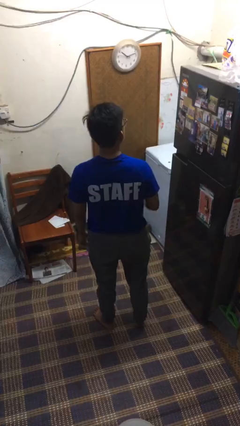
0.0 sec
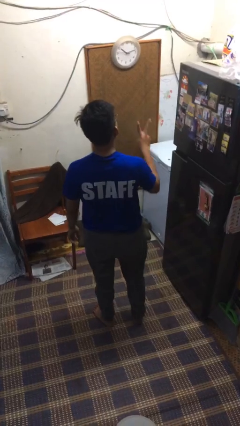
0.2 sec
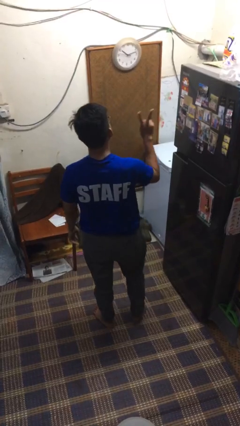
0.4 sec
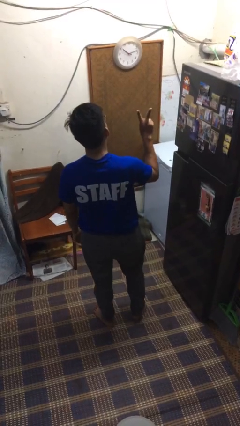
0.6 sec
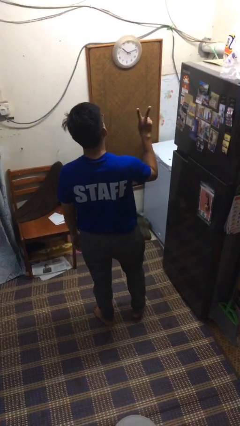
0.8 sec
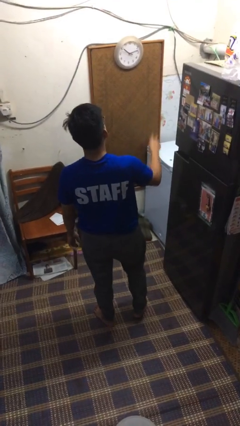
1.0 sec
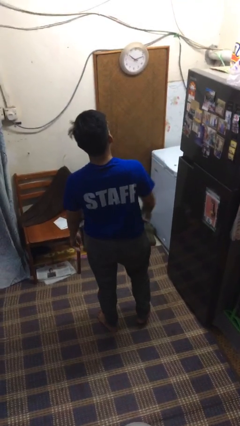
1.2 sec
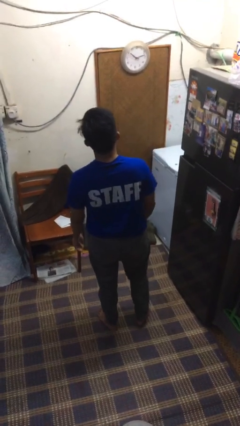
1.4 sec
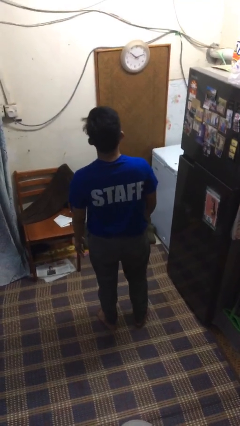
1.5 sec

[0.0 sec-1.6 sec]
person gestures peace

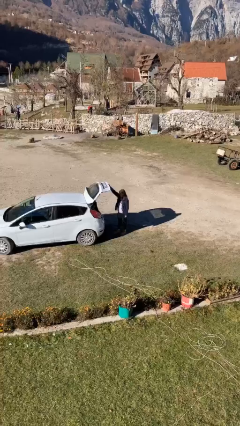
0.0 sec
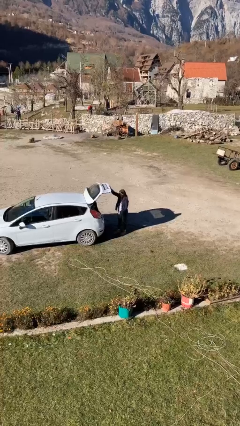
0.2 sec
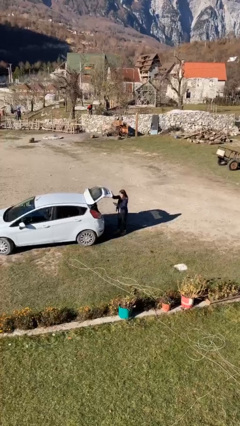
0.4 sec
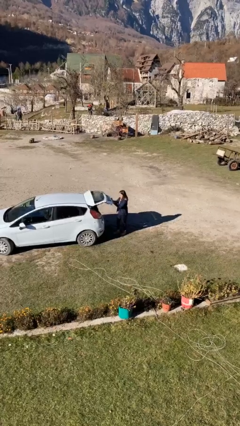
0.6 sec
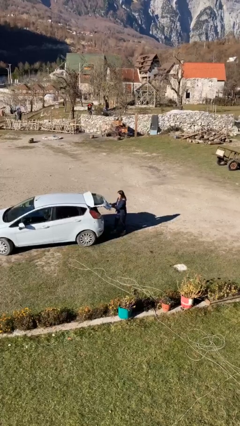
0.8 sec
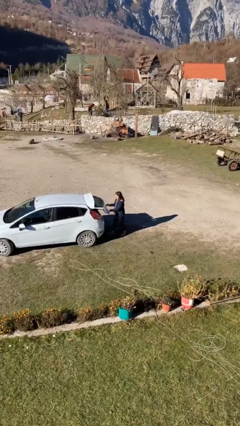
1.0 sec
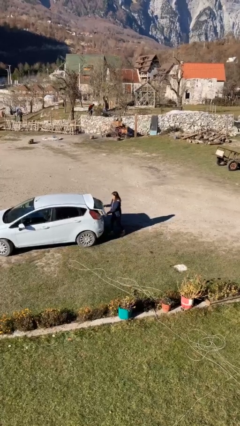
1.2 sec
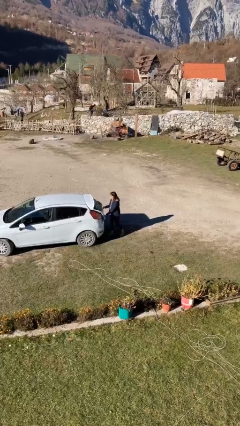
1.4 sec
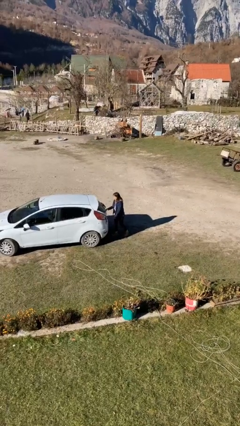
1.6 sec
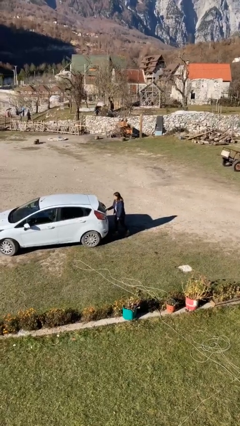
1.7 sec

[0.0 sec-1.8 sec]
person closes car trunk

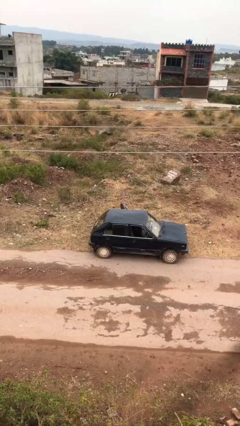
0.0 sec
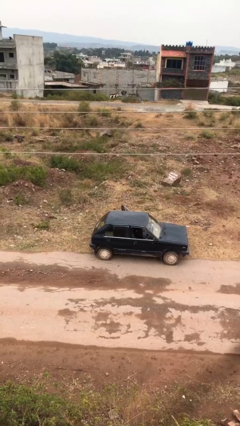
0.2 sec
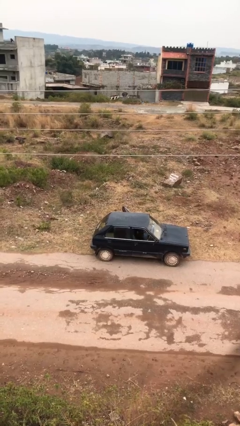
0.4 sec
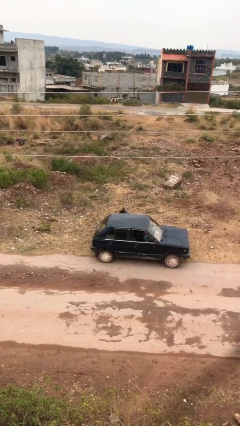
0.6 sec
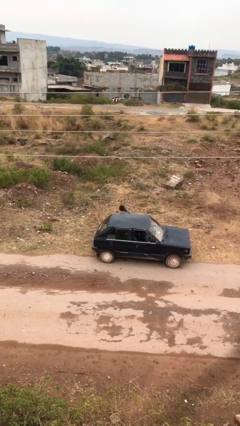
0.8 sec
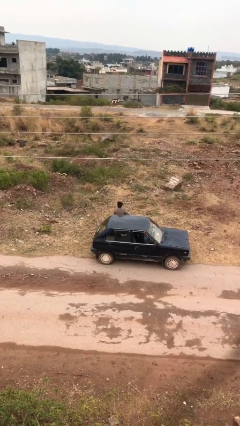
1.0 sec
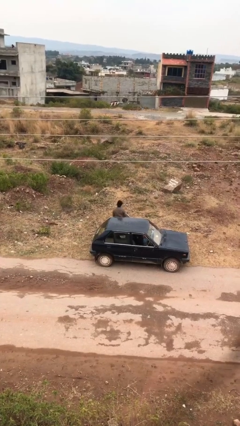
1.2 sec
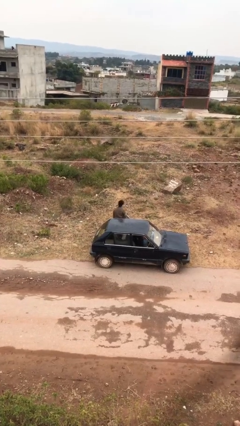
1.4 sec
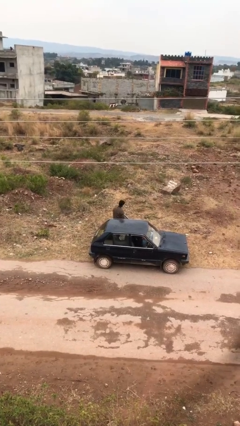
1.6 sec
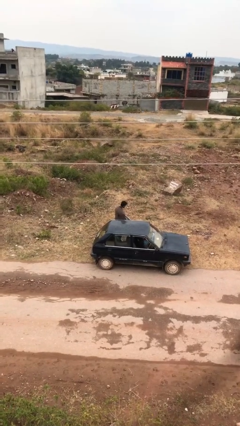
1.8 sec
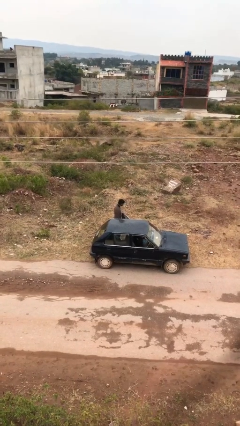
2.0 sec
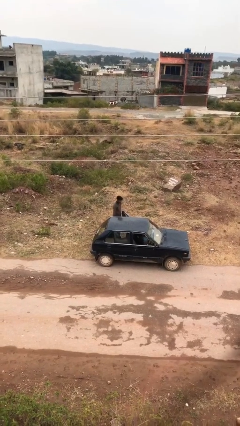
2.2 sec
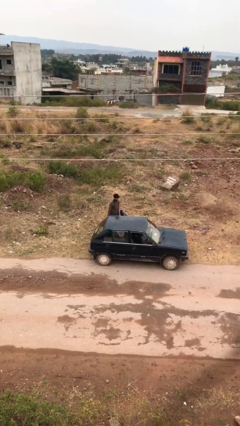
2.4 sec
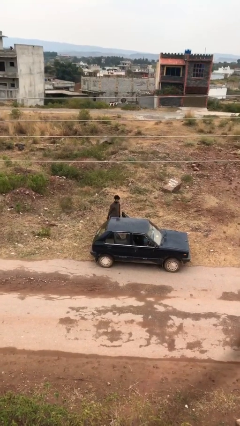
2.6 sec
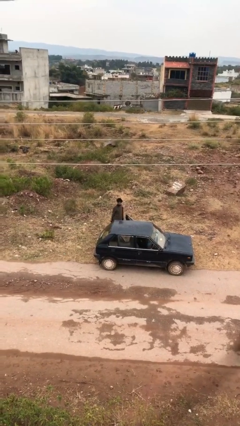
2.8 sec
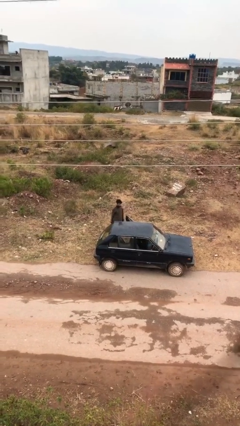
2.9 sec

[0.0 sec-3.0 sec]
person exits car

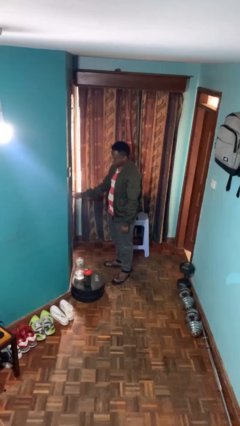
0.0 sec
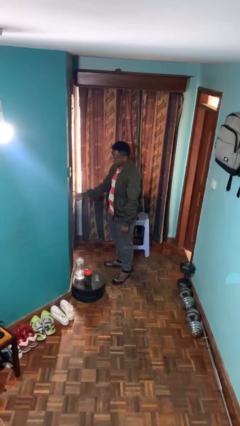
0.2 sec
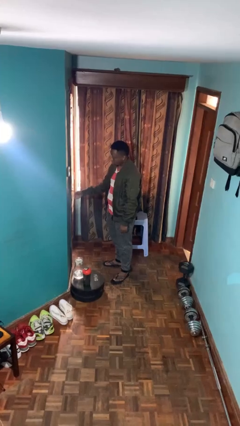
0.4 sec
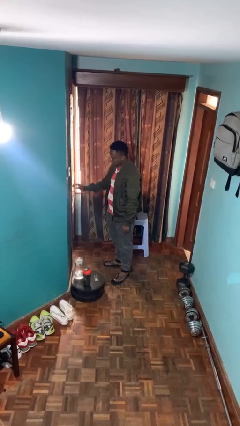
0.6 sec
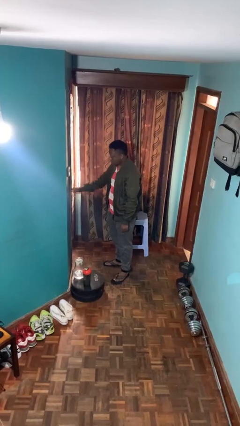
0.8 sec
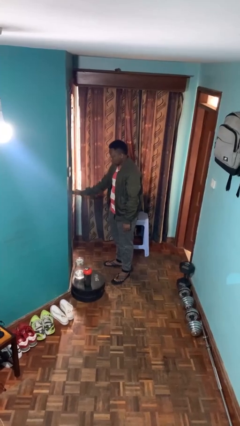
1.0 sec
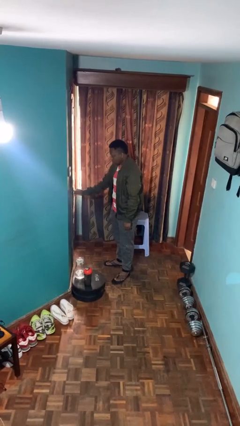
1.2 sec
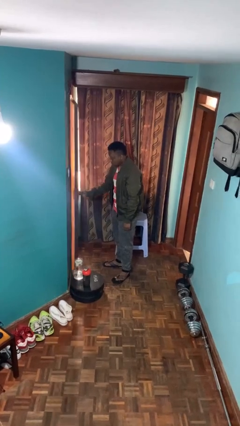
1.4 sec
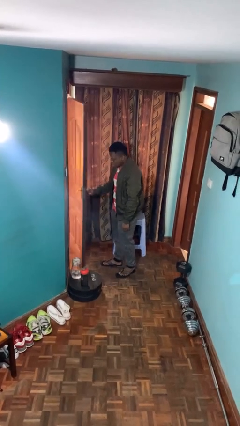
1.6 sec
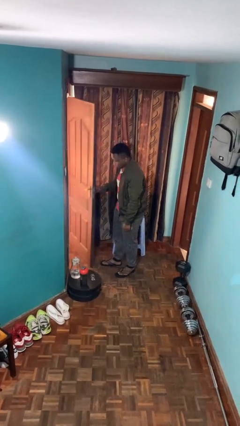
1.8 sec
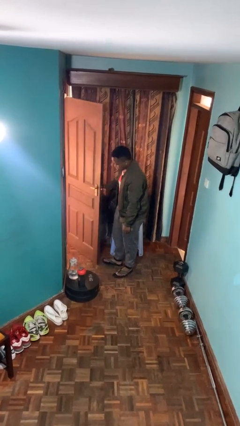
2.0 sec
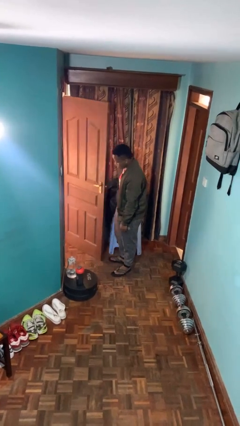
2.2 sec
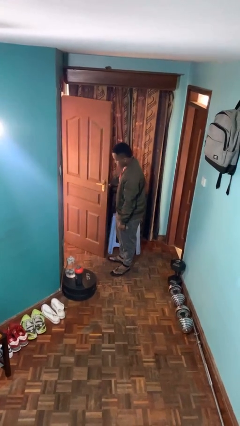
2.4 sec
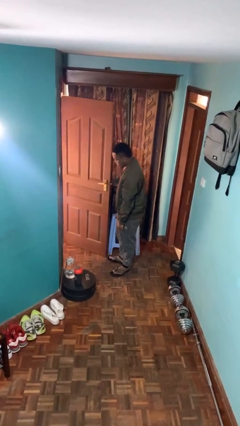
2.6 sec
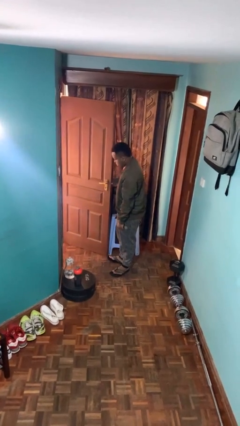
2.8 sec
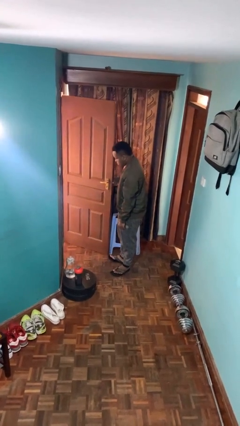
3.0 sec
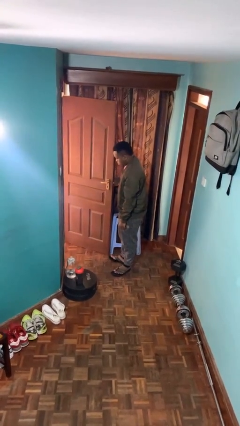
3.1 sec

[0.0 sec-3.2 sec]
person opens facility door

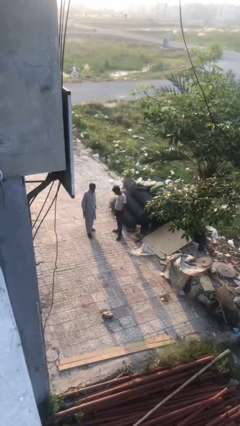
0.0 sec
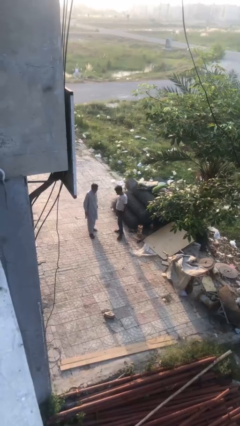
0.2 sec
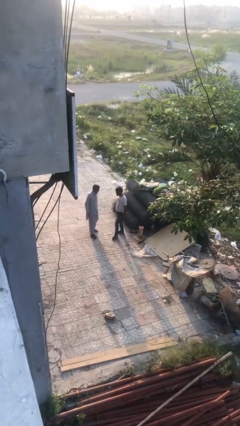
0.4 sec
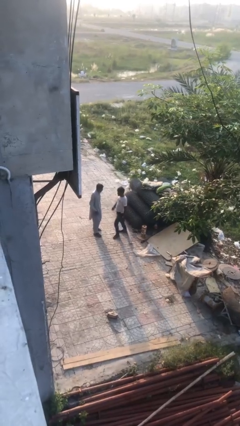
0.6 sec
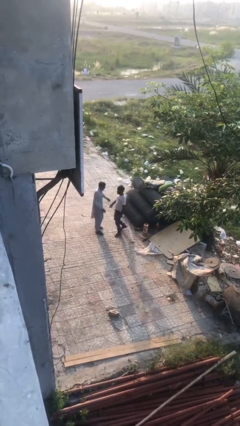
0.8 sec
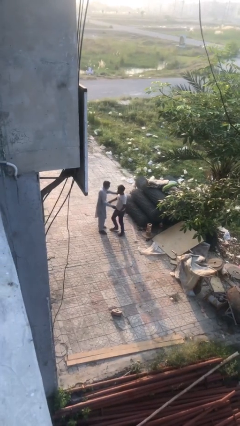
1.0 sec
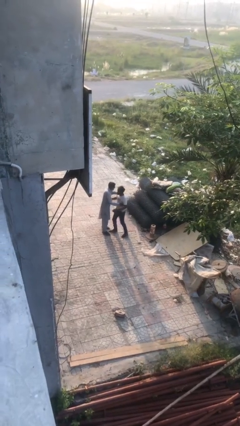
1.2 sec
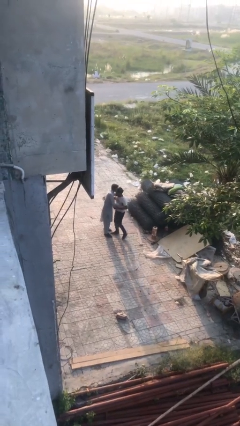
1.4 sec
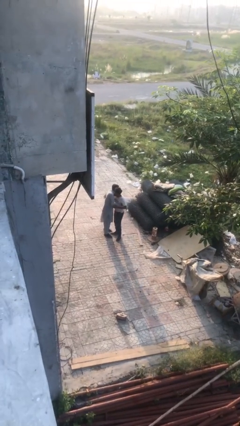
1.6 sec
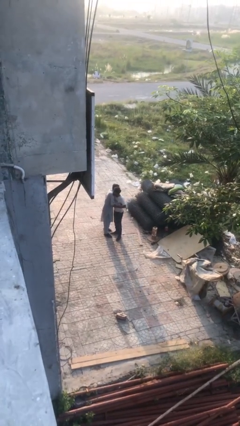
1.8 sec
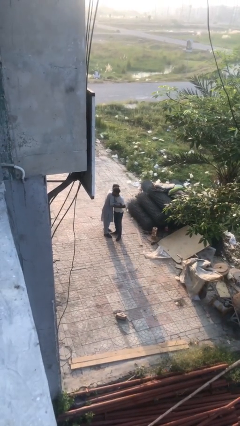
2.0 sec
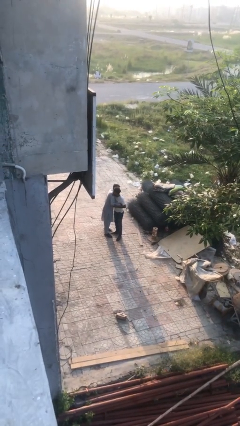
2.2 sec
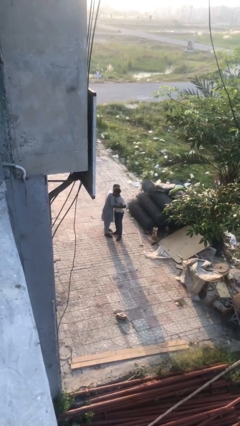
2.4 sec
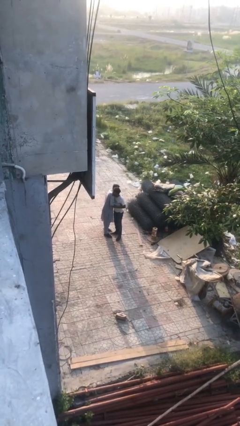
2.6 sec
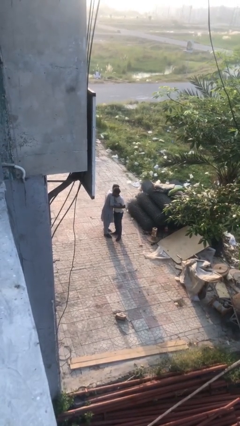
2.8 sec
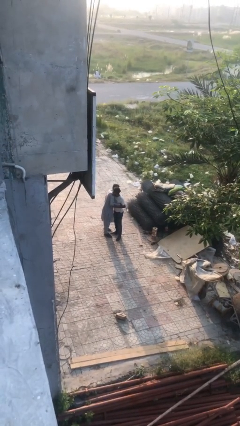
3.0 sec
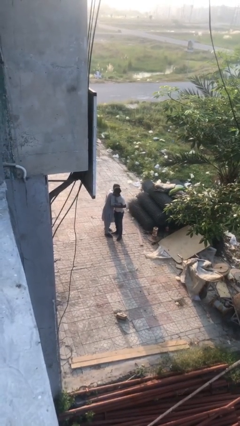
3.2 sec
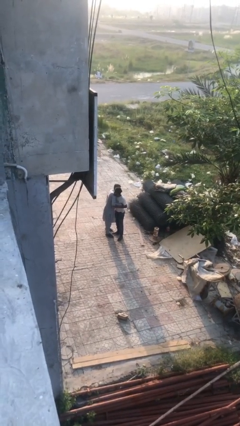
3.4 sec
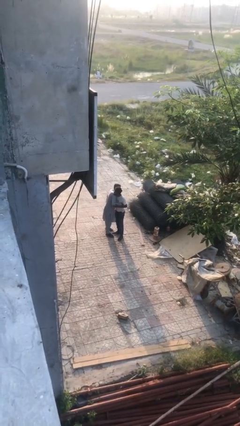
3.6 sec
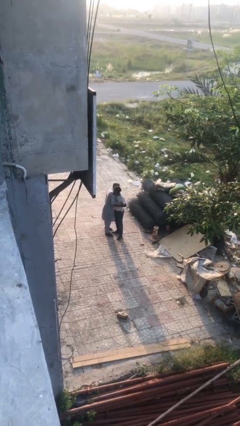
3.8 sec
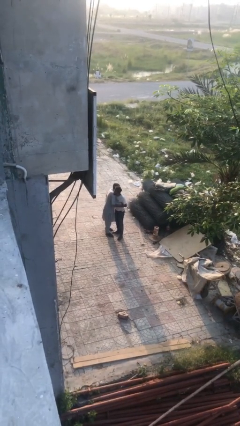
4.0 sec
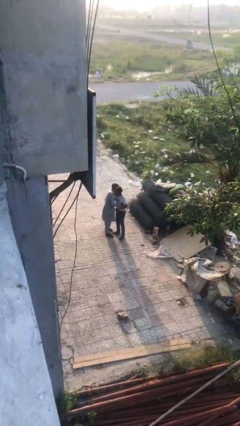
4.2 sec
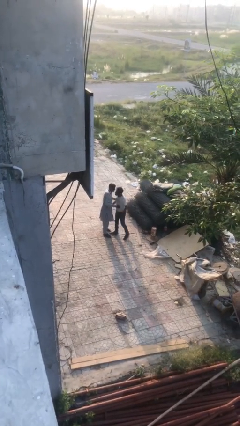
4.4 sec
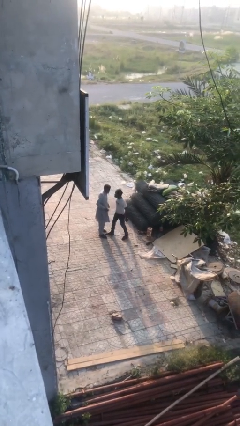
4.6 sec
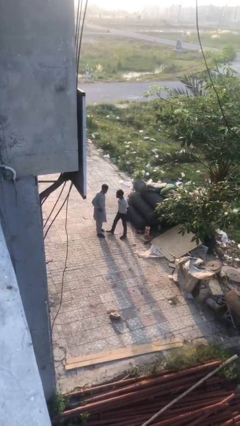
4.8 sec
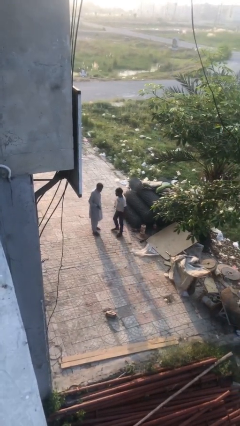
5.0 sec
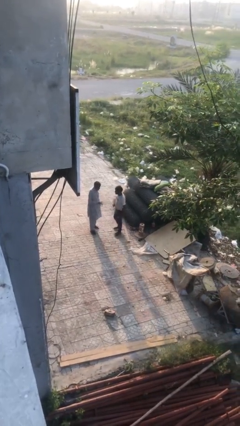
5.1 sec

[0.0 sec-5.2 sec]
person embraces person

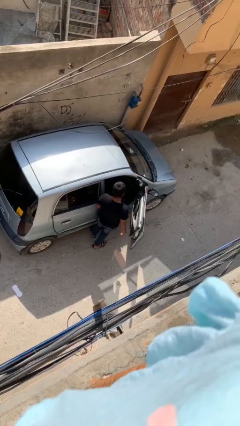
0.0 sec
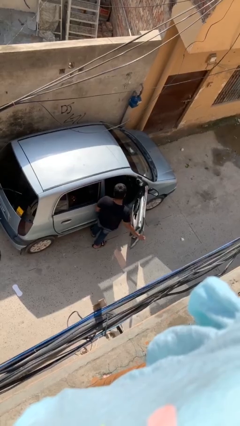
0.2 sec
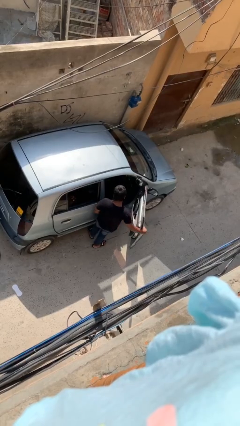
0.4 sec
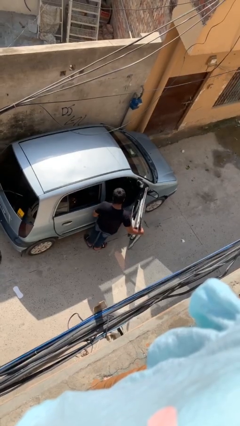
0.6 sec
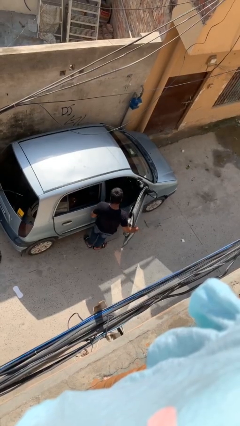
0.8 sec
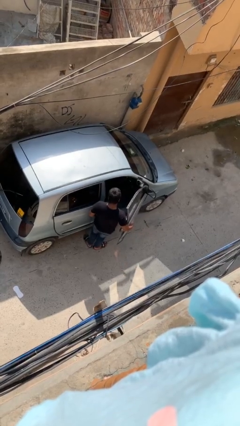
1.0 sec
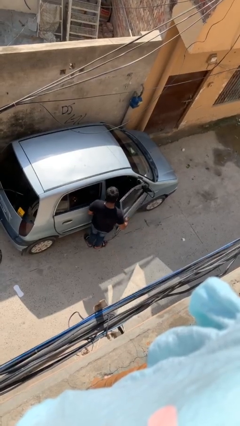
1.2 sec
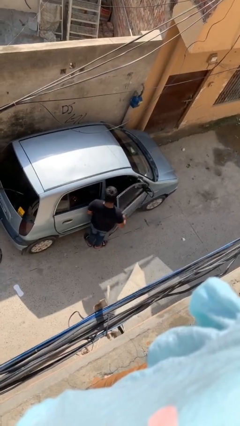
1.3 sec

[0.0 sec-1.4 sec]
person closes car door

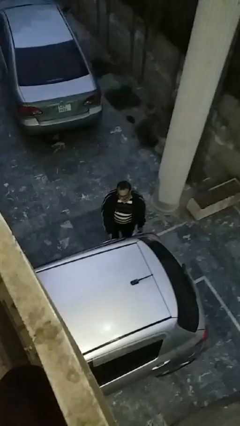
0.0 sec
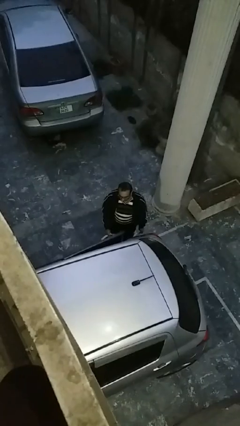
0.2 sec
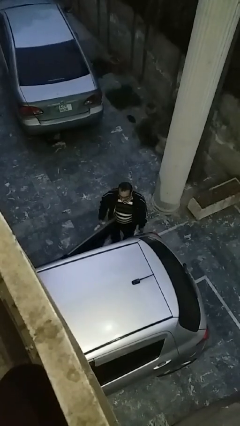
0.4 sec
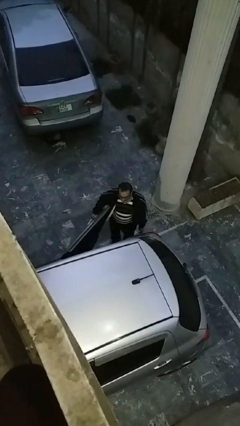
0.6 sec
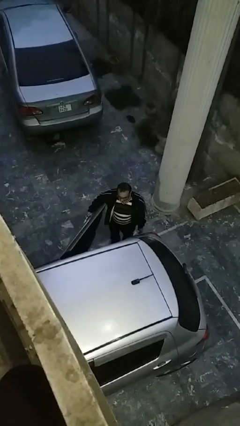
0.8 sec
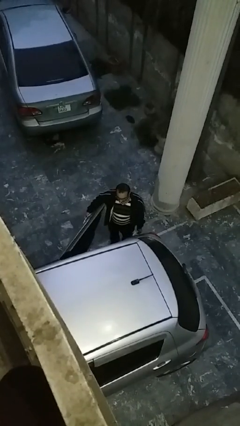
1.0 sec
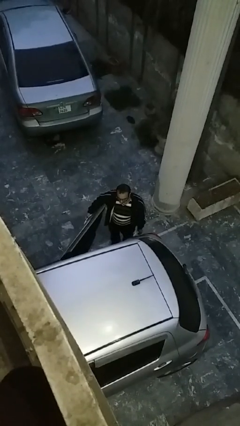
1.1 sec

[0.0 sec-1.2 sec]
person opens car door

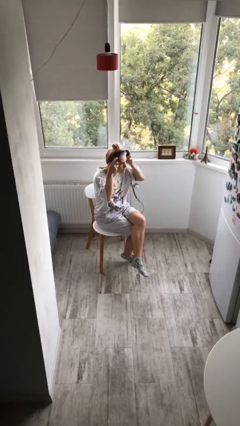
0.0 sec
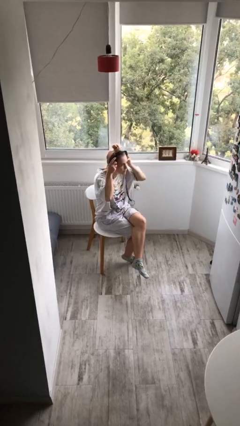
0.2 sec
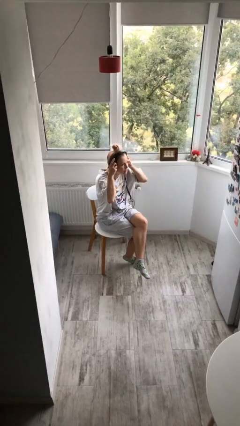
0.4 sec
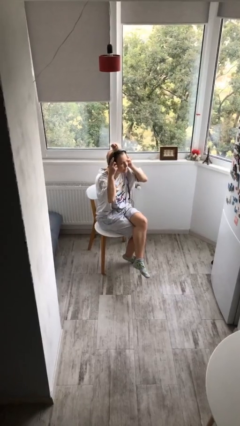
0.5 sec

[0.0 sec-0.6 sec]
person puts on headphones
